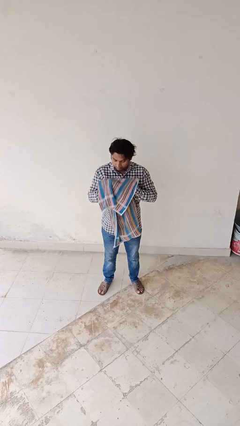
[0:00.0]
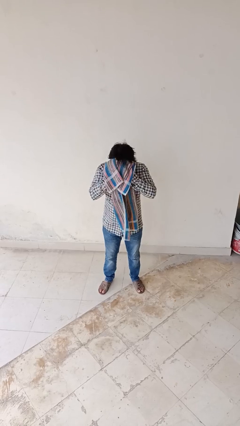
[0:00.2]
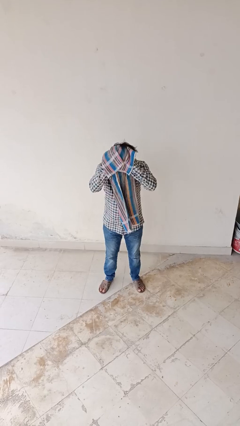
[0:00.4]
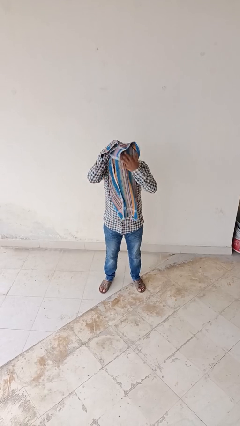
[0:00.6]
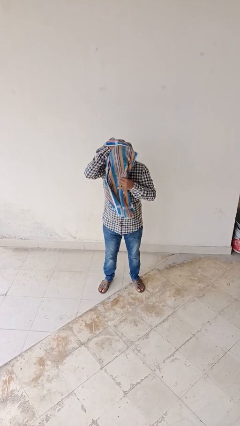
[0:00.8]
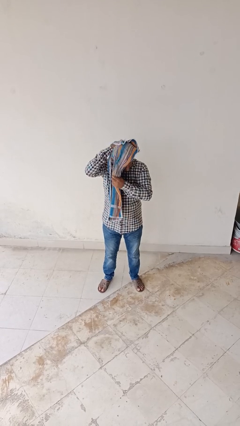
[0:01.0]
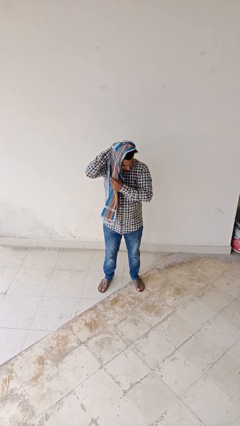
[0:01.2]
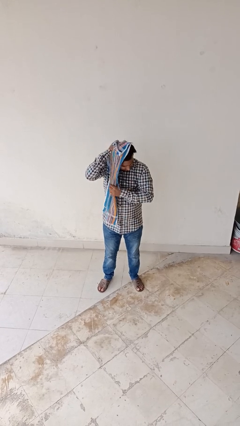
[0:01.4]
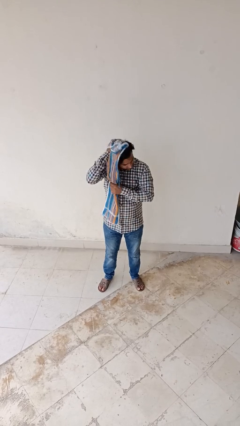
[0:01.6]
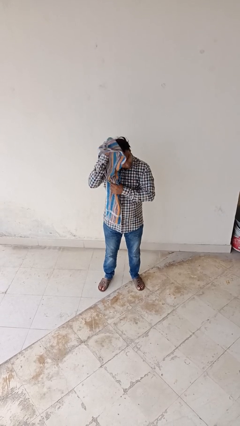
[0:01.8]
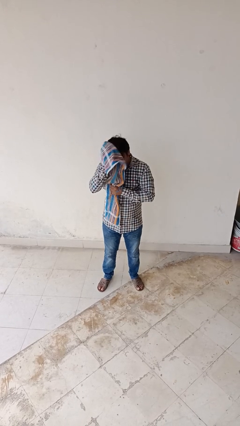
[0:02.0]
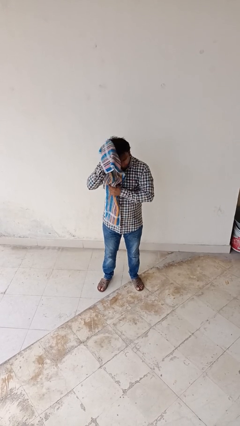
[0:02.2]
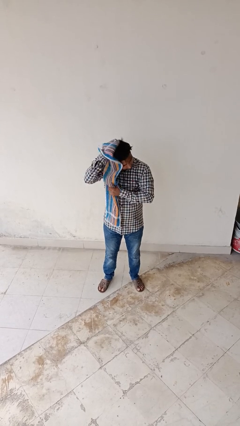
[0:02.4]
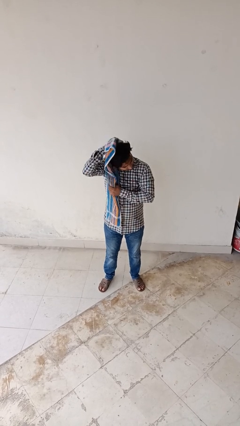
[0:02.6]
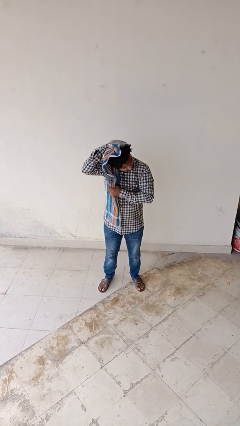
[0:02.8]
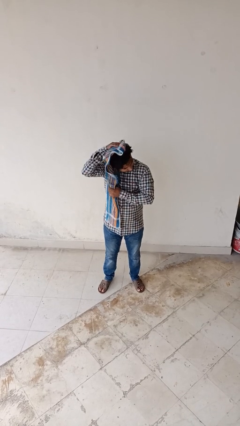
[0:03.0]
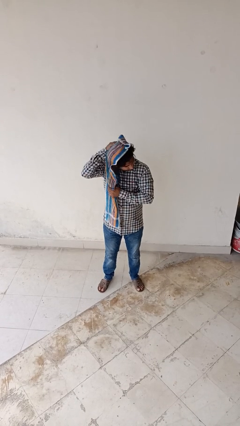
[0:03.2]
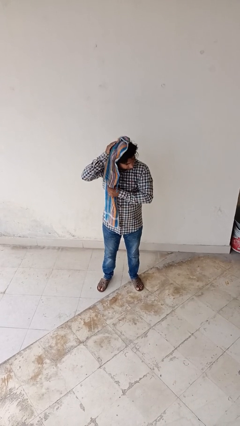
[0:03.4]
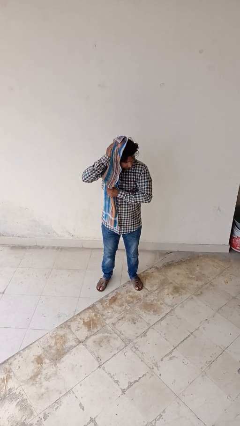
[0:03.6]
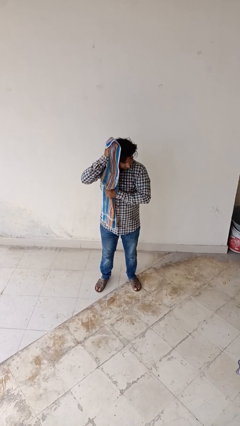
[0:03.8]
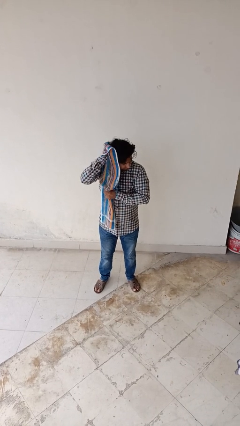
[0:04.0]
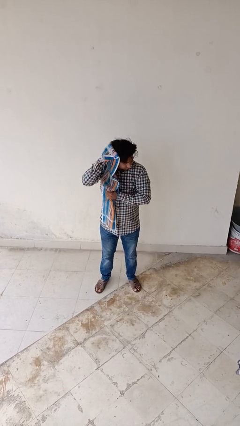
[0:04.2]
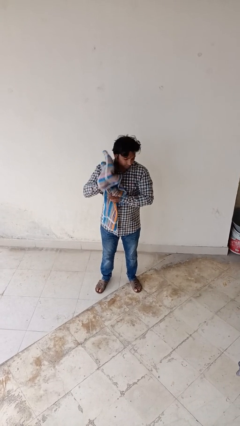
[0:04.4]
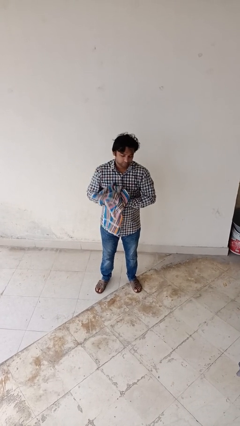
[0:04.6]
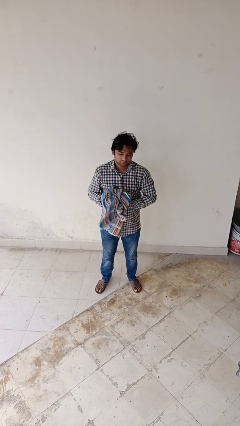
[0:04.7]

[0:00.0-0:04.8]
person dries hair with towel

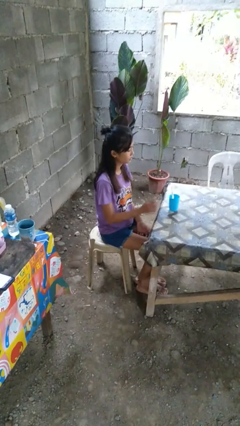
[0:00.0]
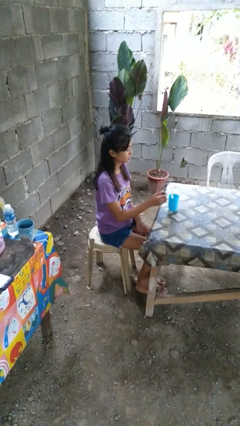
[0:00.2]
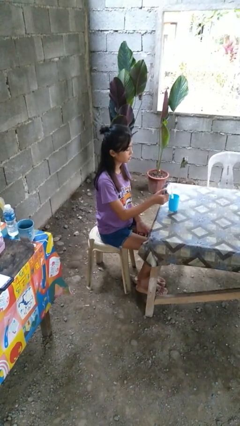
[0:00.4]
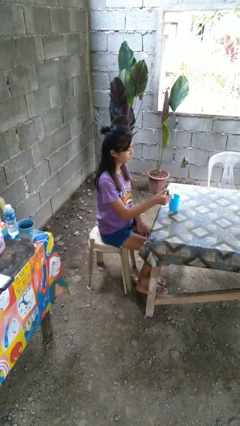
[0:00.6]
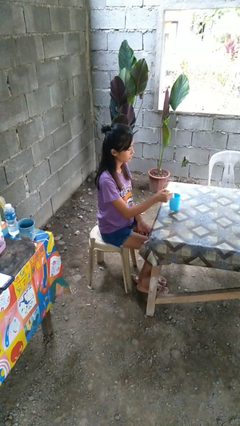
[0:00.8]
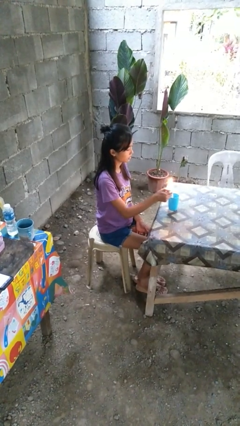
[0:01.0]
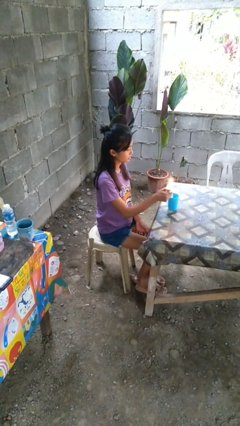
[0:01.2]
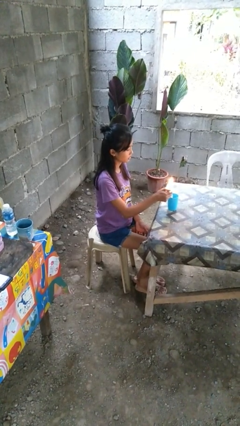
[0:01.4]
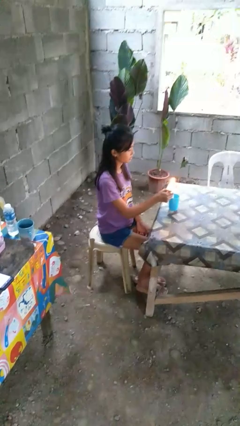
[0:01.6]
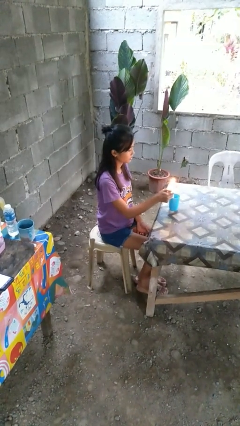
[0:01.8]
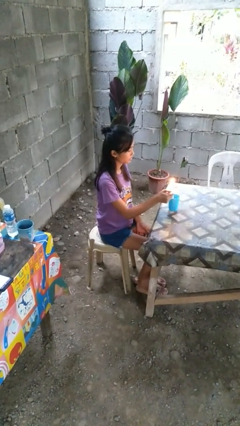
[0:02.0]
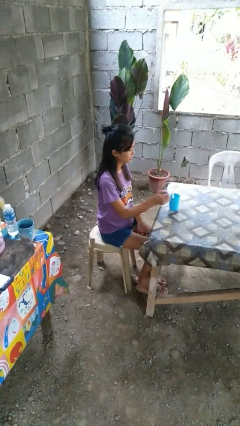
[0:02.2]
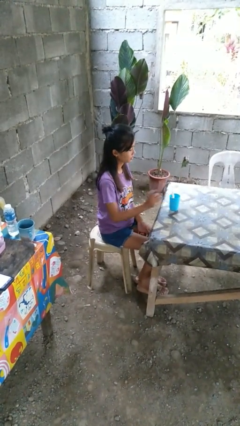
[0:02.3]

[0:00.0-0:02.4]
person lights candle

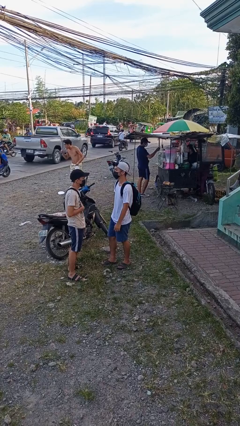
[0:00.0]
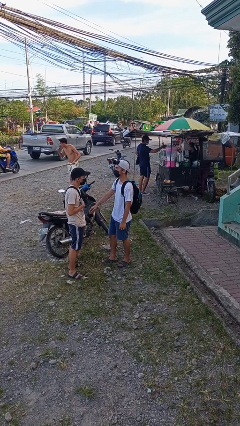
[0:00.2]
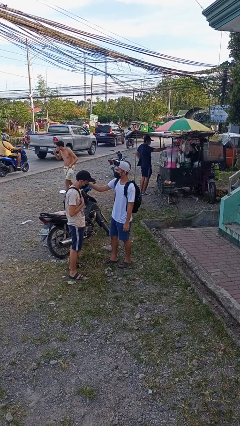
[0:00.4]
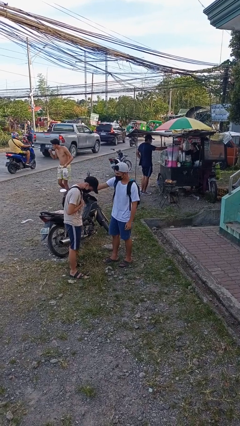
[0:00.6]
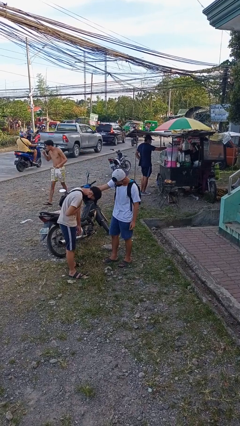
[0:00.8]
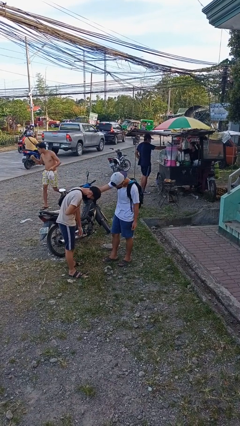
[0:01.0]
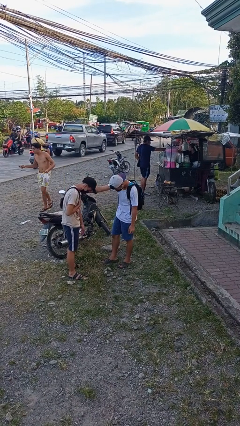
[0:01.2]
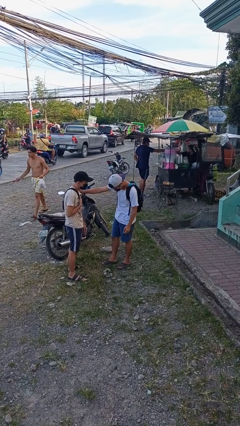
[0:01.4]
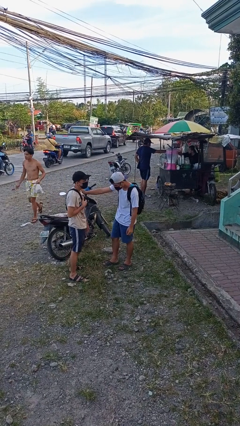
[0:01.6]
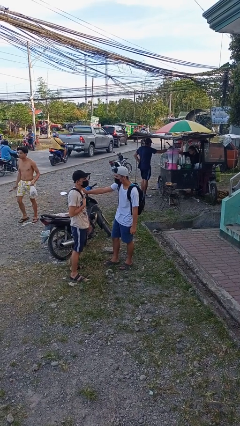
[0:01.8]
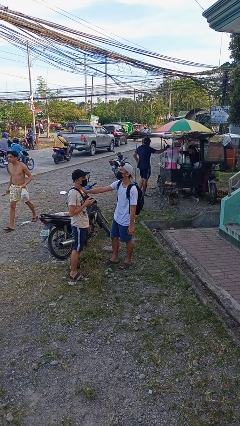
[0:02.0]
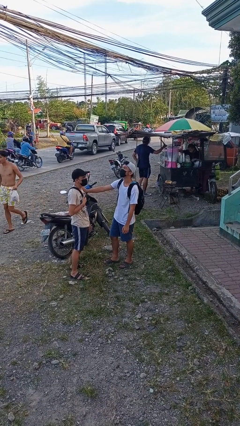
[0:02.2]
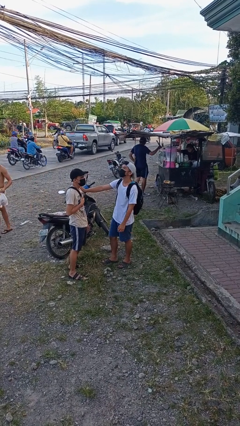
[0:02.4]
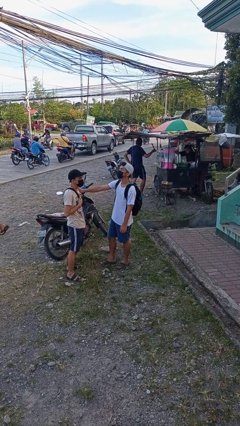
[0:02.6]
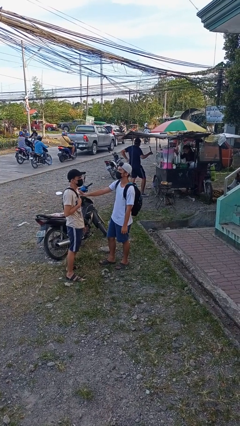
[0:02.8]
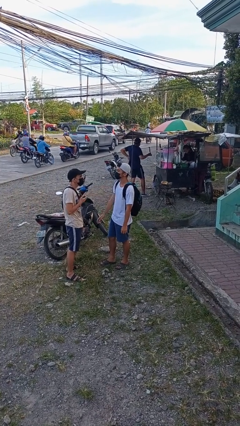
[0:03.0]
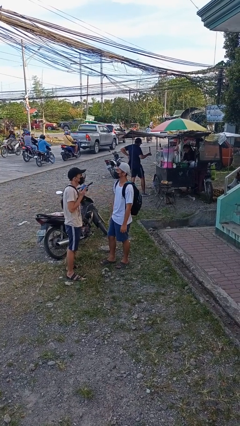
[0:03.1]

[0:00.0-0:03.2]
person laughs with person

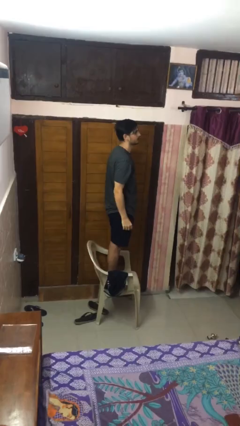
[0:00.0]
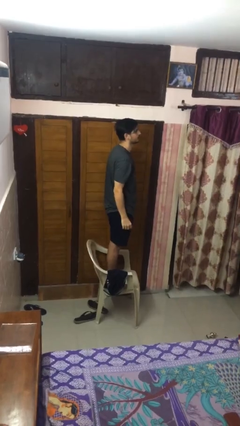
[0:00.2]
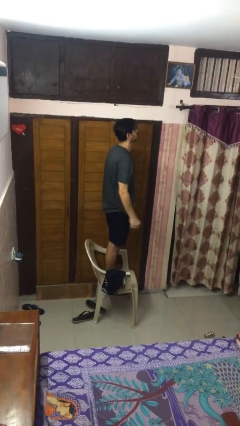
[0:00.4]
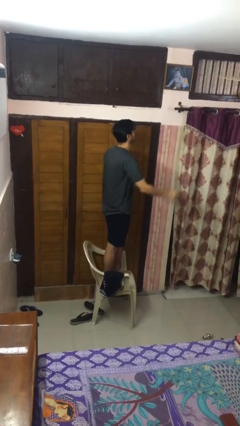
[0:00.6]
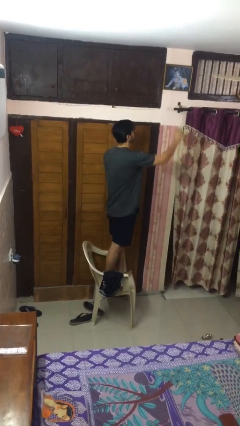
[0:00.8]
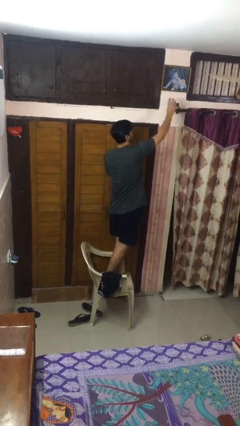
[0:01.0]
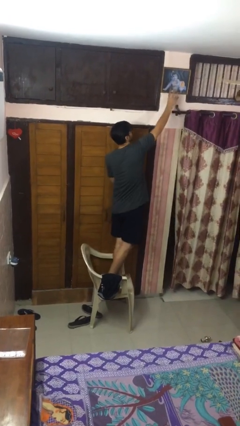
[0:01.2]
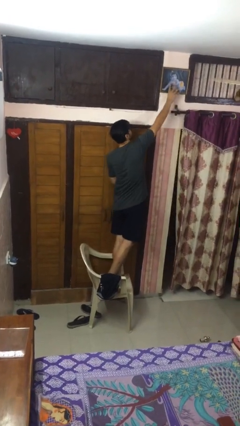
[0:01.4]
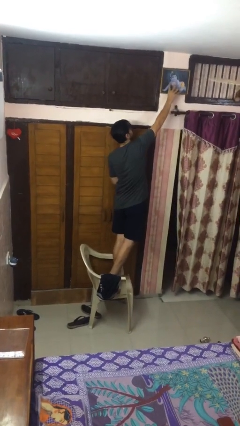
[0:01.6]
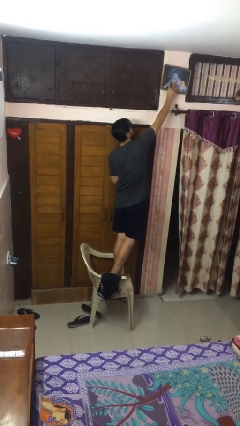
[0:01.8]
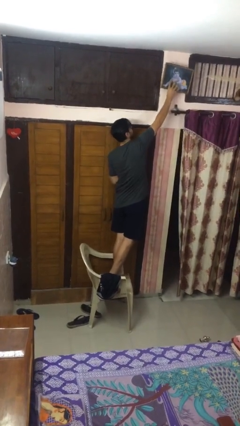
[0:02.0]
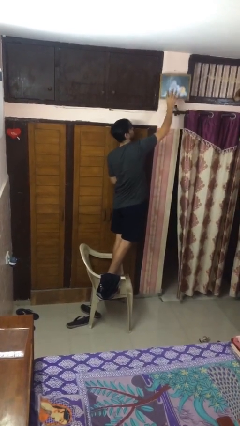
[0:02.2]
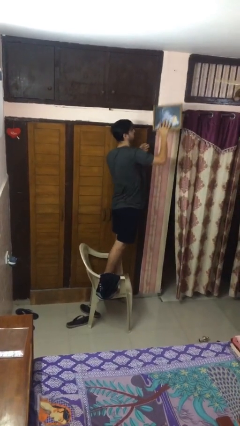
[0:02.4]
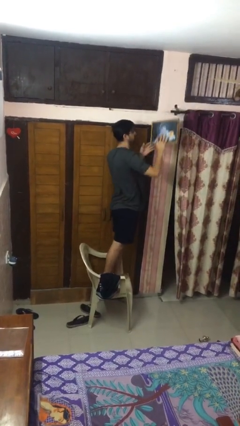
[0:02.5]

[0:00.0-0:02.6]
person takes down picture frame

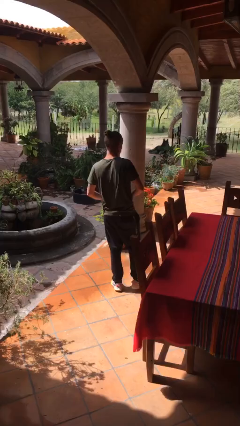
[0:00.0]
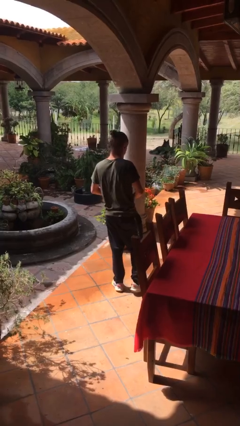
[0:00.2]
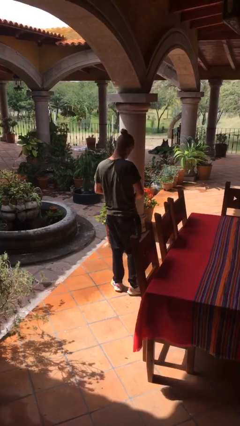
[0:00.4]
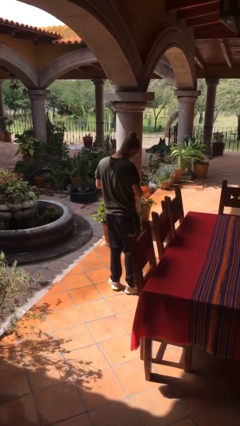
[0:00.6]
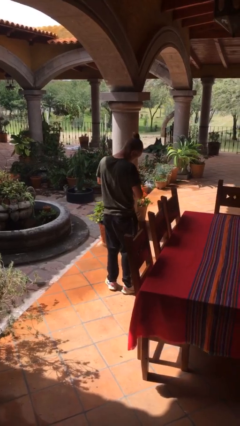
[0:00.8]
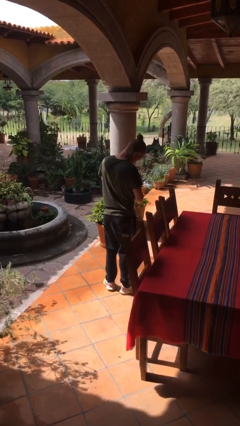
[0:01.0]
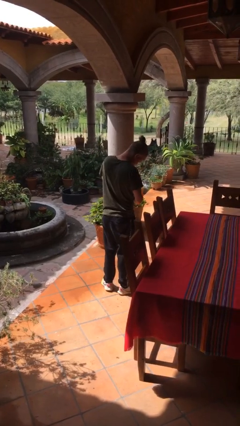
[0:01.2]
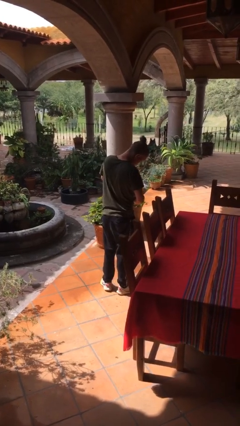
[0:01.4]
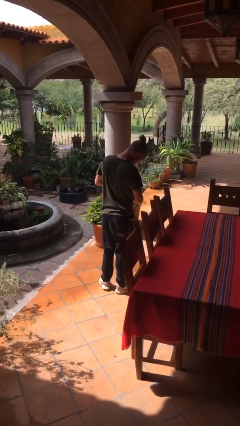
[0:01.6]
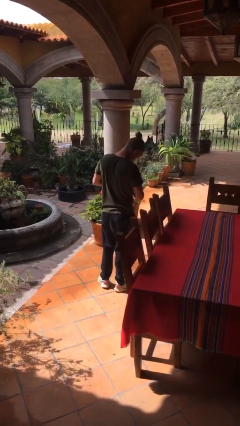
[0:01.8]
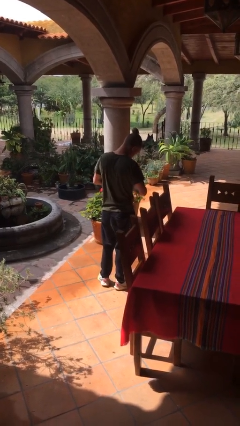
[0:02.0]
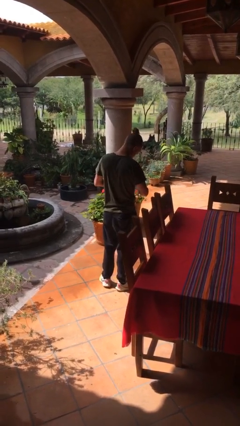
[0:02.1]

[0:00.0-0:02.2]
person opens beverage can

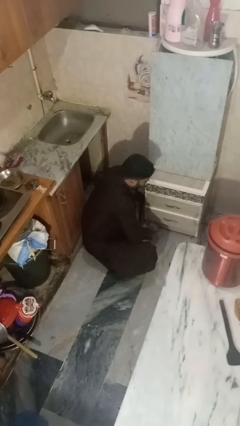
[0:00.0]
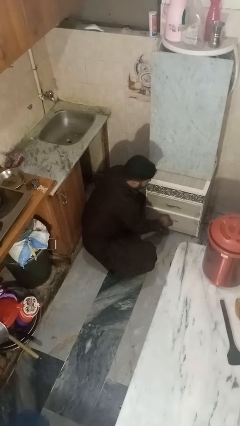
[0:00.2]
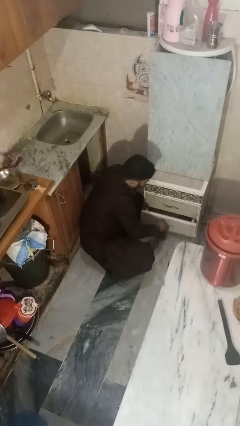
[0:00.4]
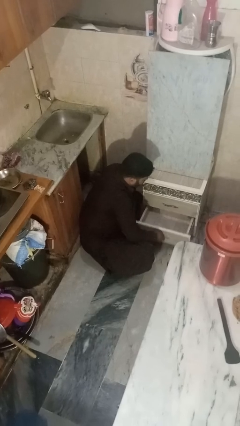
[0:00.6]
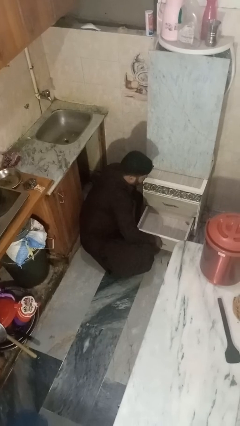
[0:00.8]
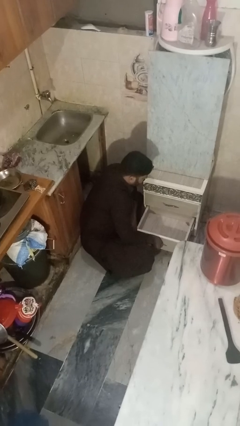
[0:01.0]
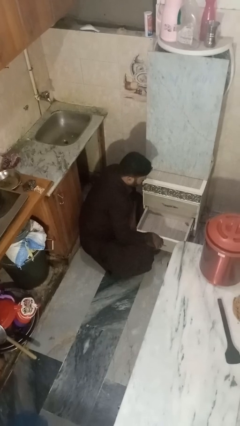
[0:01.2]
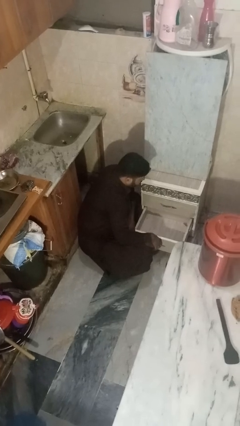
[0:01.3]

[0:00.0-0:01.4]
person opens kitchen drawer

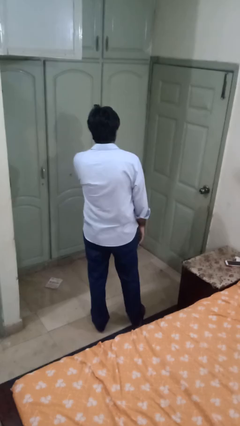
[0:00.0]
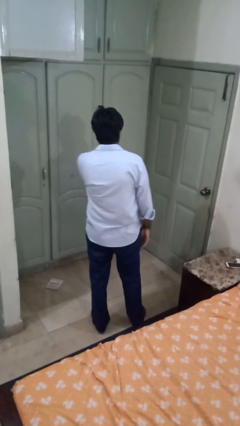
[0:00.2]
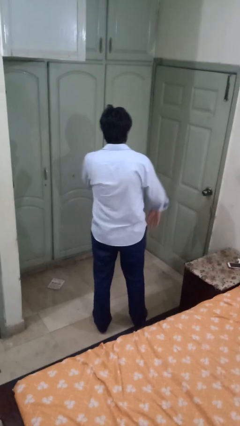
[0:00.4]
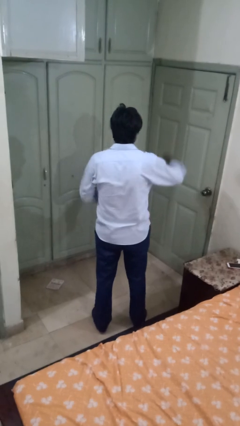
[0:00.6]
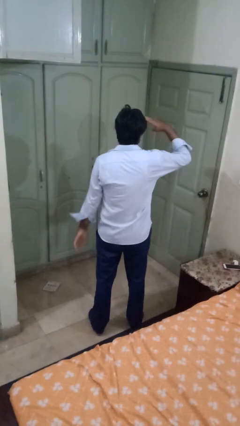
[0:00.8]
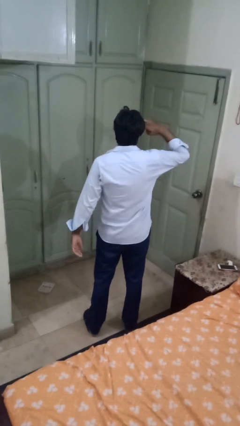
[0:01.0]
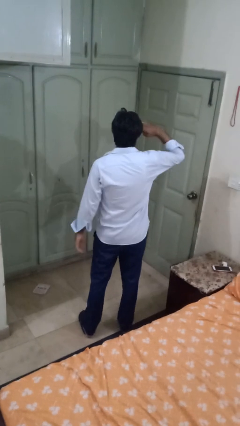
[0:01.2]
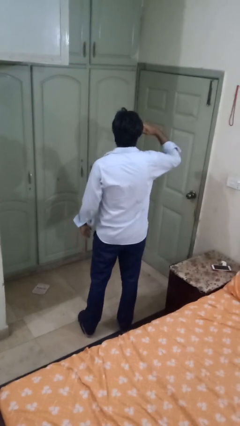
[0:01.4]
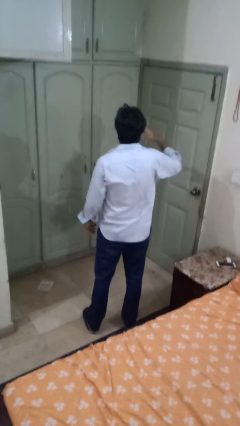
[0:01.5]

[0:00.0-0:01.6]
person salutes
